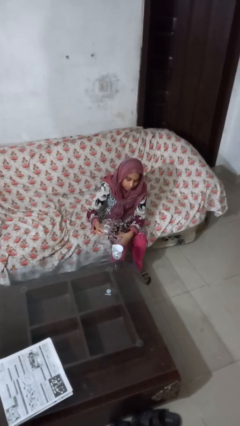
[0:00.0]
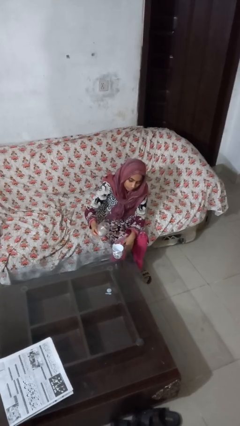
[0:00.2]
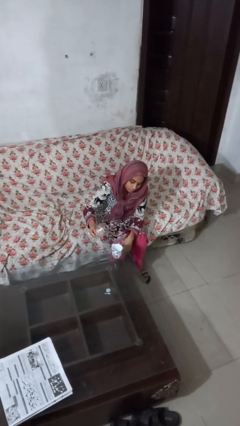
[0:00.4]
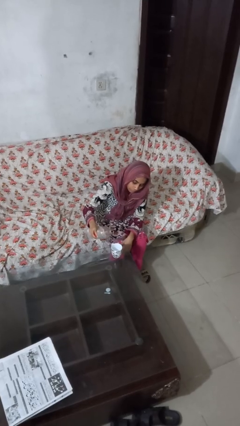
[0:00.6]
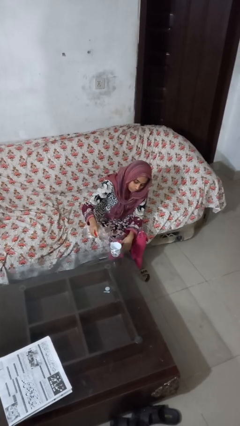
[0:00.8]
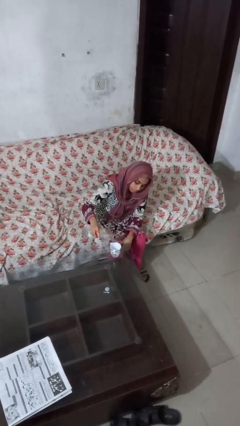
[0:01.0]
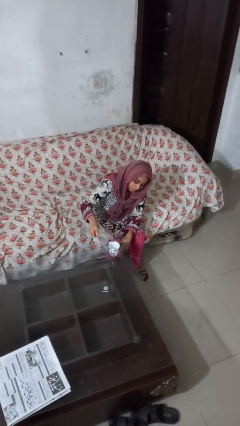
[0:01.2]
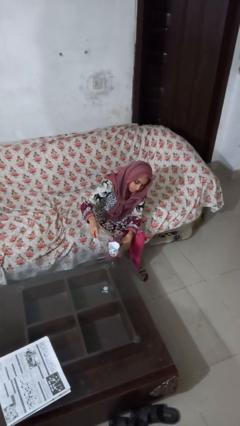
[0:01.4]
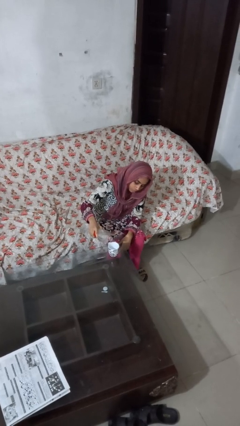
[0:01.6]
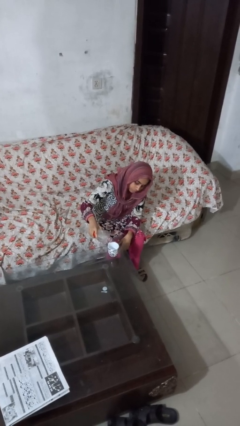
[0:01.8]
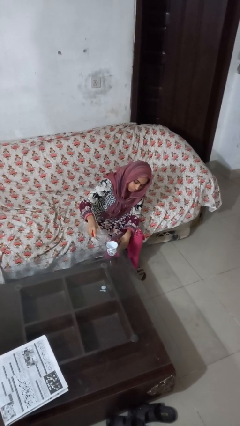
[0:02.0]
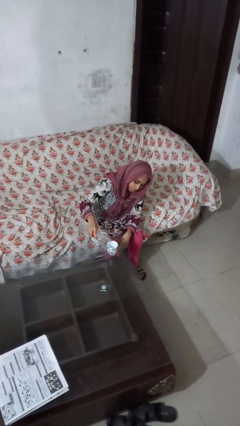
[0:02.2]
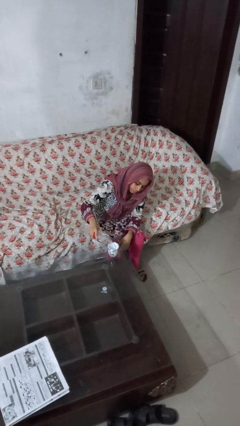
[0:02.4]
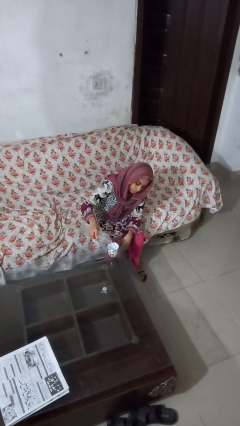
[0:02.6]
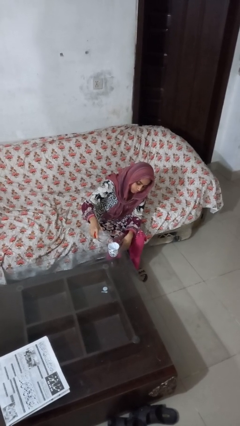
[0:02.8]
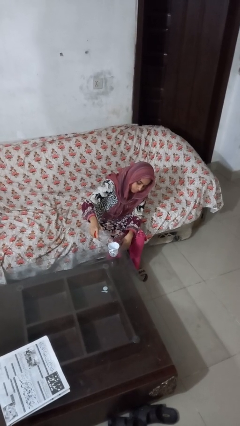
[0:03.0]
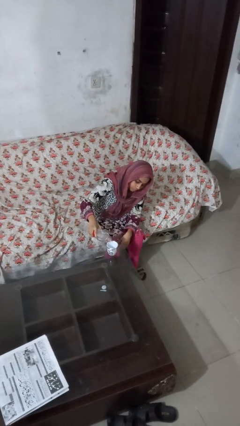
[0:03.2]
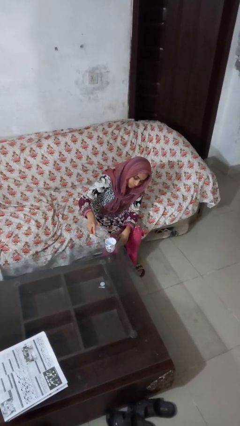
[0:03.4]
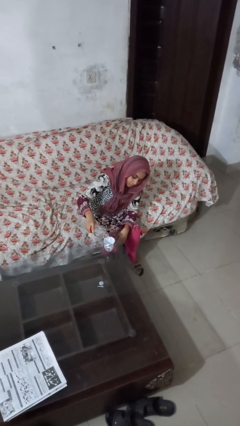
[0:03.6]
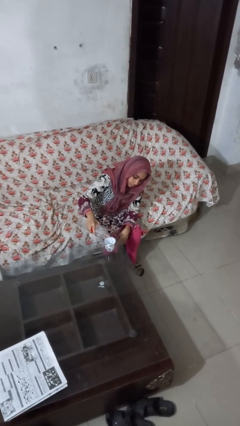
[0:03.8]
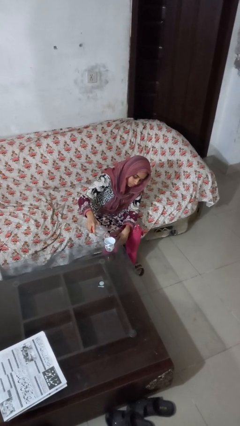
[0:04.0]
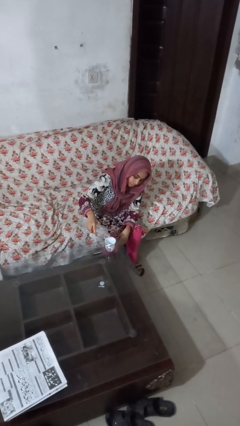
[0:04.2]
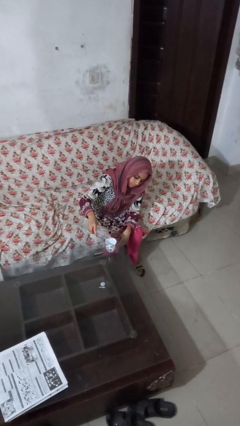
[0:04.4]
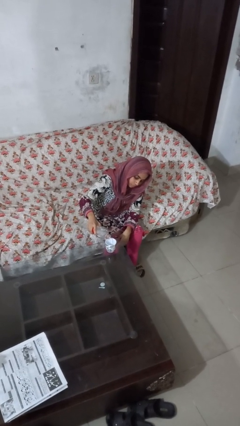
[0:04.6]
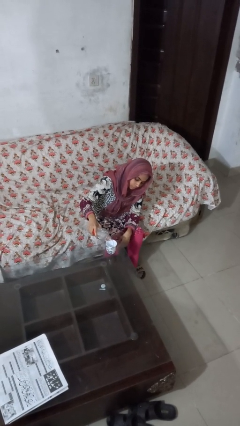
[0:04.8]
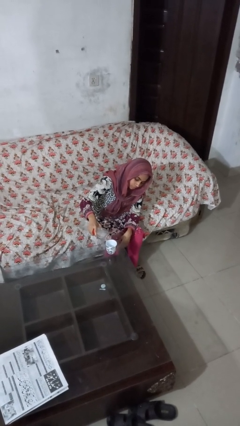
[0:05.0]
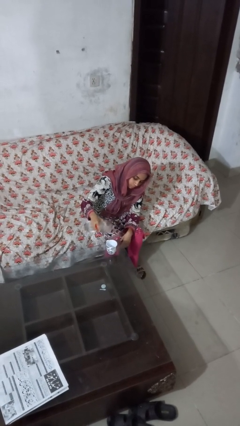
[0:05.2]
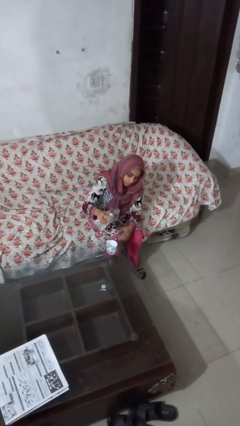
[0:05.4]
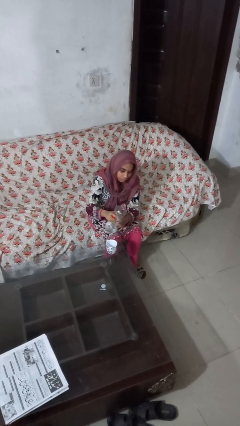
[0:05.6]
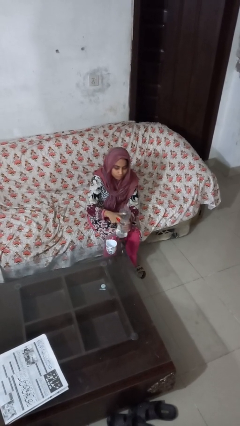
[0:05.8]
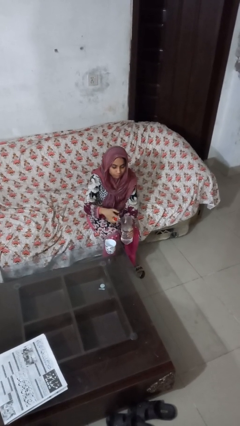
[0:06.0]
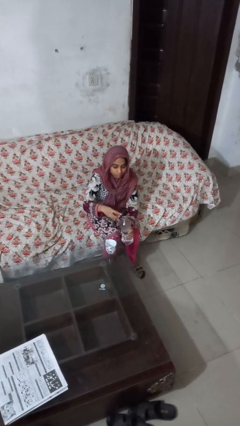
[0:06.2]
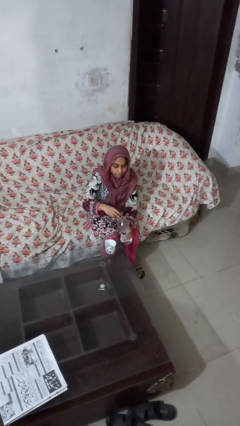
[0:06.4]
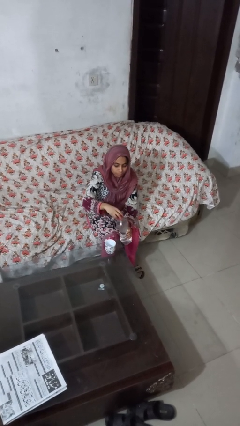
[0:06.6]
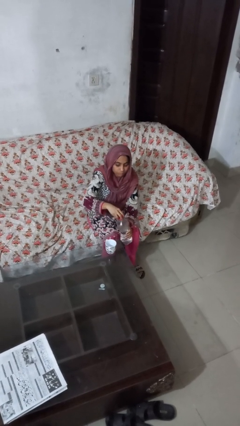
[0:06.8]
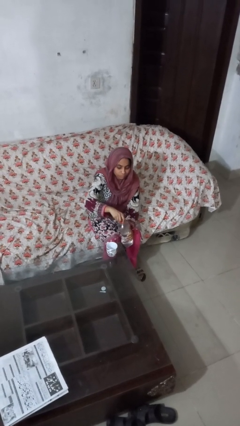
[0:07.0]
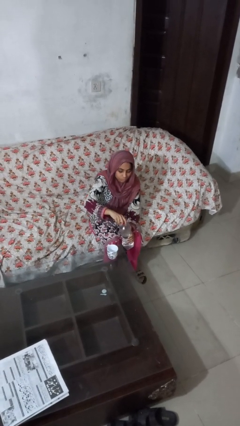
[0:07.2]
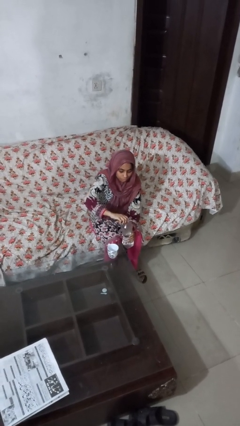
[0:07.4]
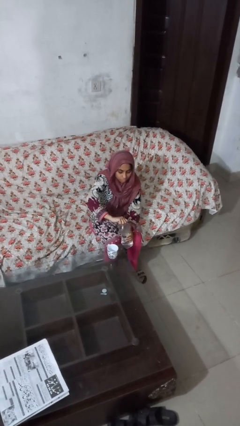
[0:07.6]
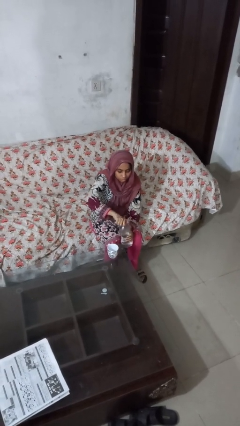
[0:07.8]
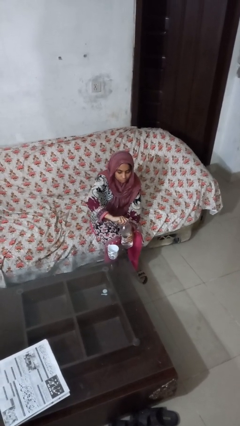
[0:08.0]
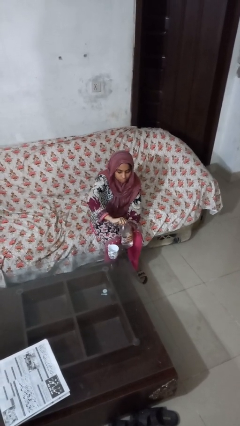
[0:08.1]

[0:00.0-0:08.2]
person pours liquid into cup

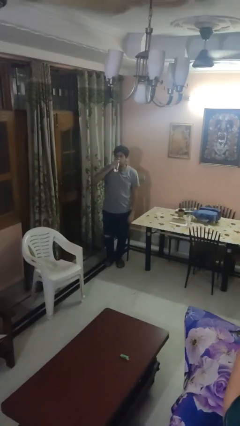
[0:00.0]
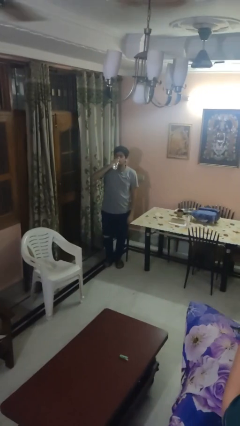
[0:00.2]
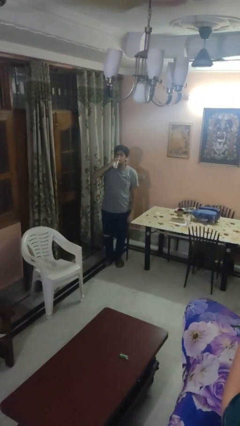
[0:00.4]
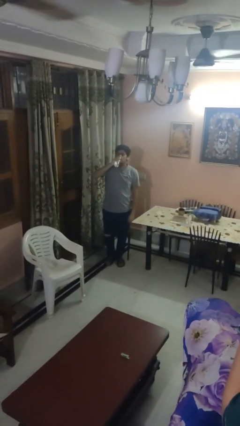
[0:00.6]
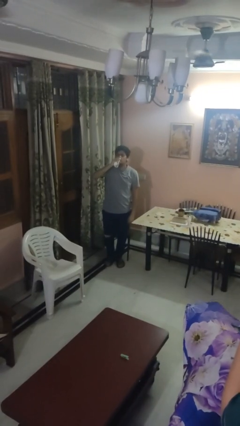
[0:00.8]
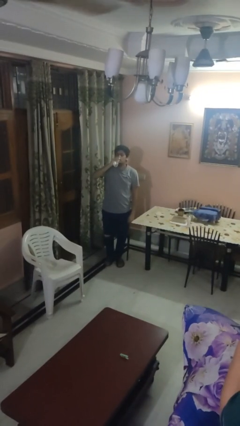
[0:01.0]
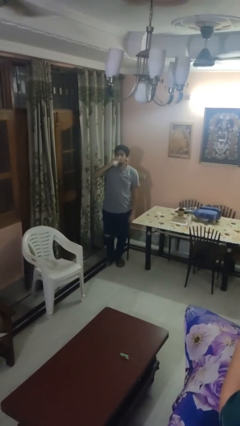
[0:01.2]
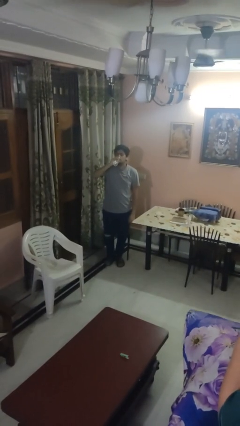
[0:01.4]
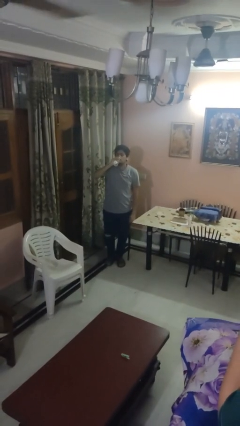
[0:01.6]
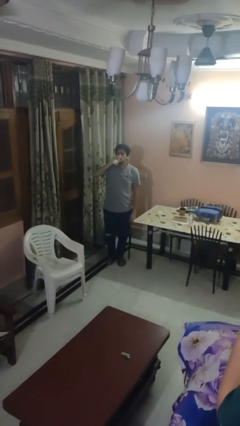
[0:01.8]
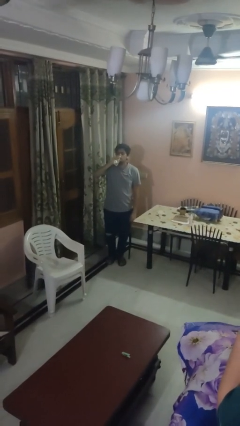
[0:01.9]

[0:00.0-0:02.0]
person drinks from bottle

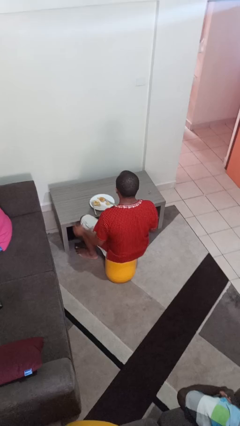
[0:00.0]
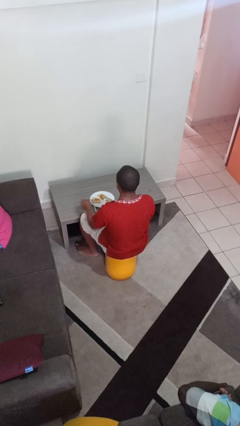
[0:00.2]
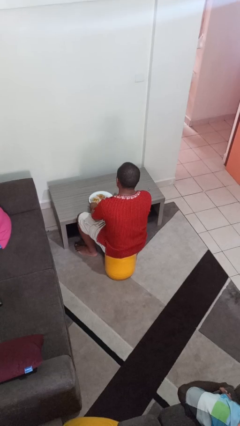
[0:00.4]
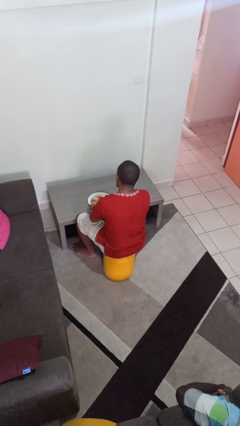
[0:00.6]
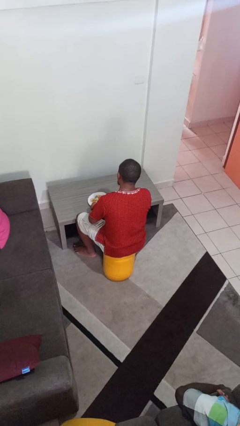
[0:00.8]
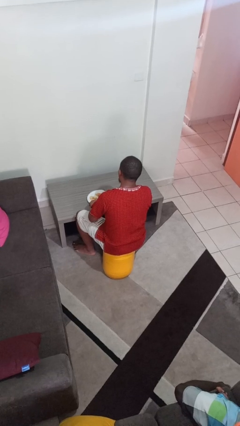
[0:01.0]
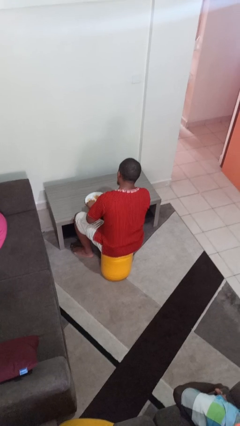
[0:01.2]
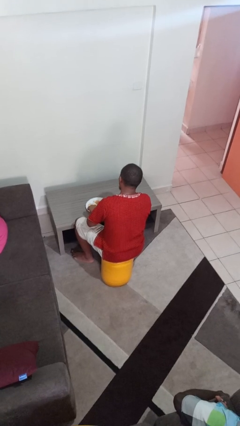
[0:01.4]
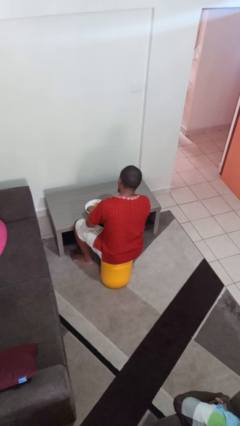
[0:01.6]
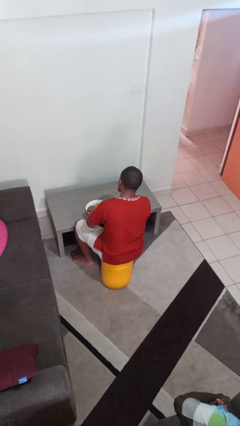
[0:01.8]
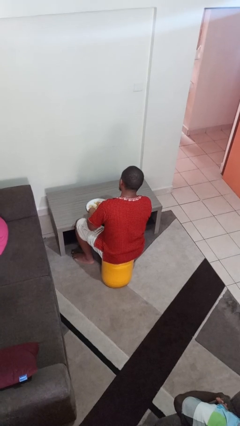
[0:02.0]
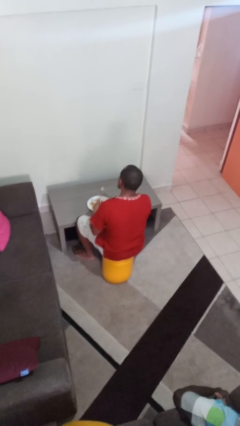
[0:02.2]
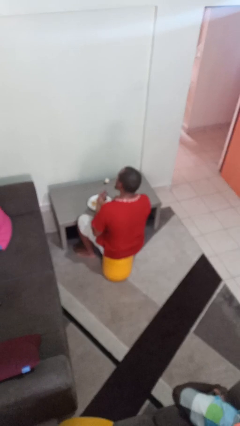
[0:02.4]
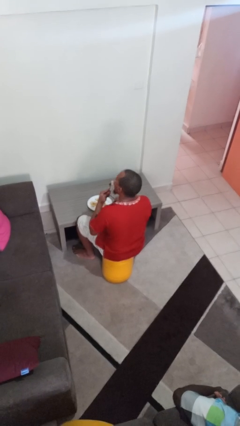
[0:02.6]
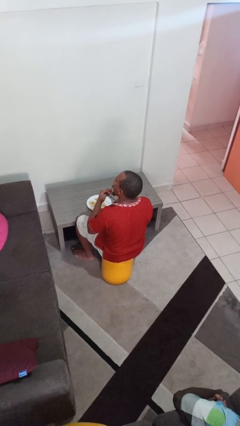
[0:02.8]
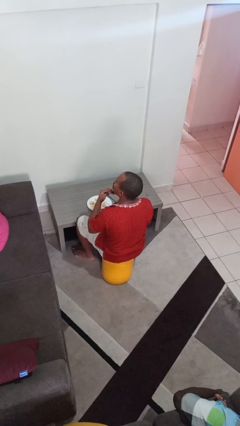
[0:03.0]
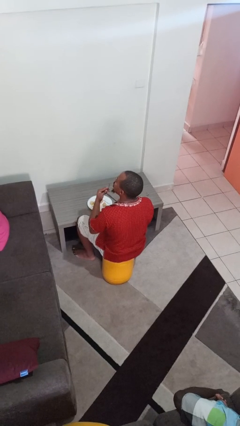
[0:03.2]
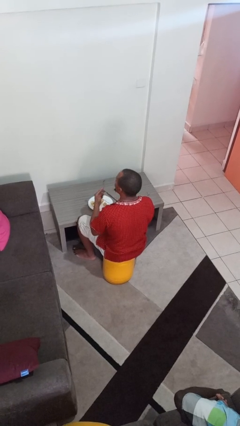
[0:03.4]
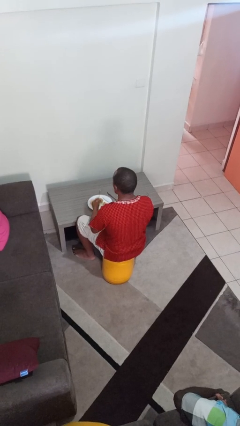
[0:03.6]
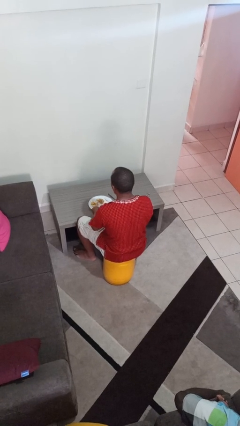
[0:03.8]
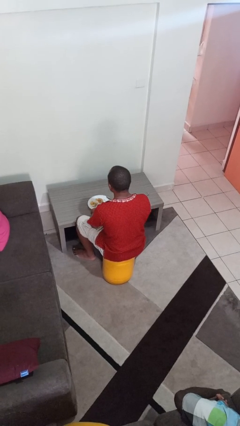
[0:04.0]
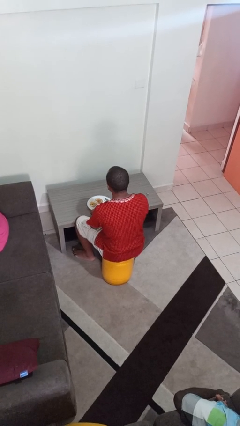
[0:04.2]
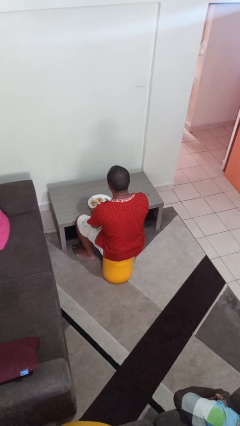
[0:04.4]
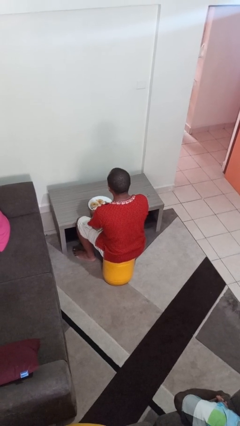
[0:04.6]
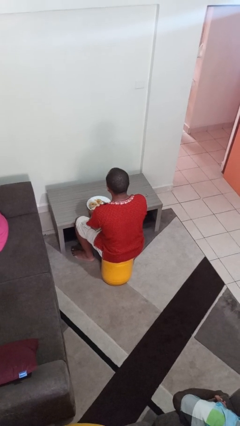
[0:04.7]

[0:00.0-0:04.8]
person eats with utensil

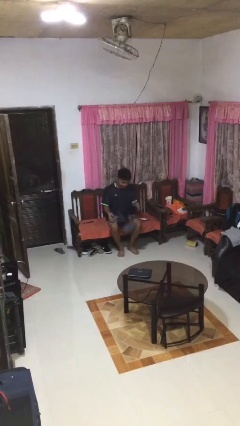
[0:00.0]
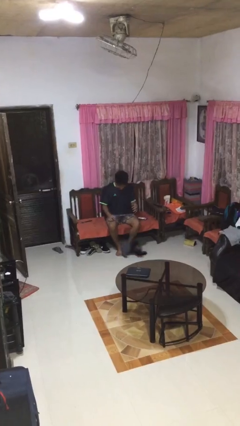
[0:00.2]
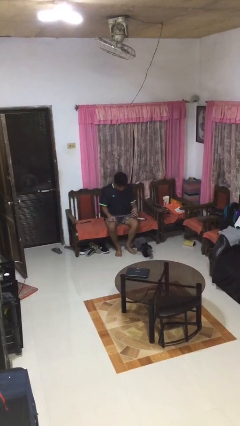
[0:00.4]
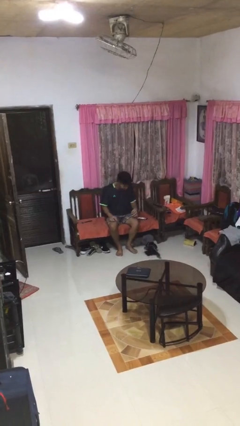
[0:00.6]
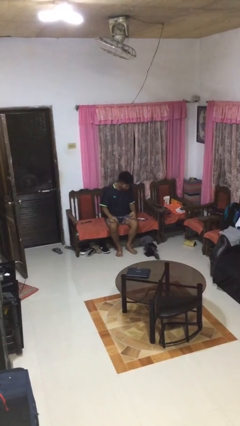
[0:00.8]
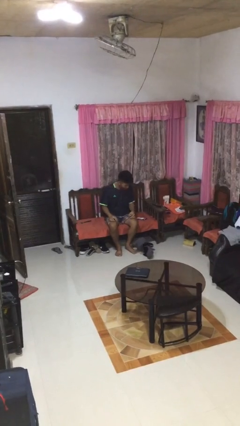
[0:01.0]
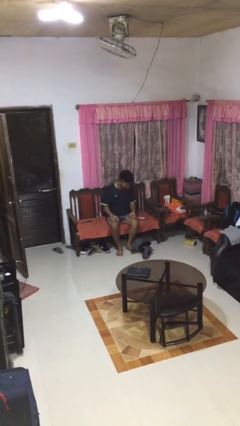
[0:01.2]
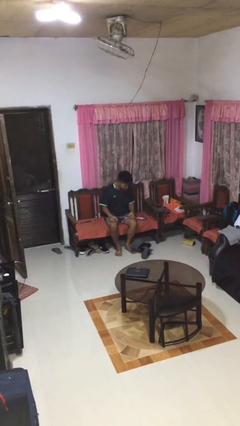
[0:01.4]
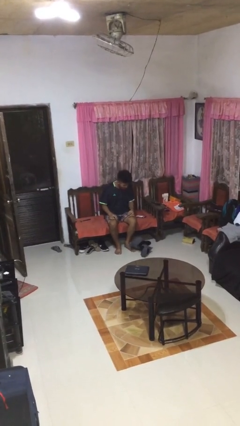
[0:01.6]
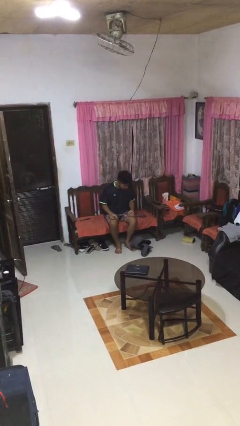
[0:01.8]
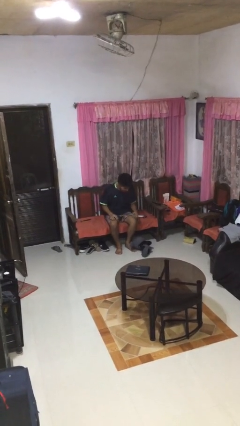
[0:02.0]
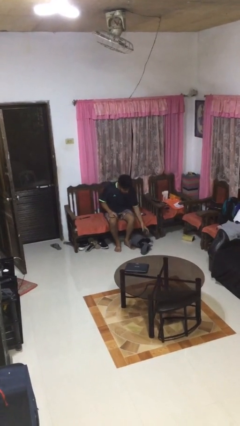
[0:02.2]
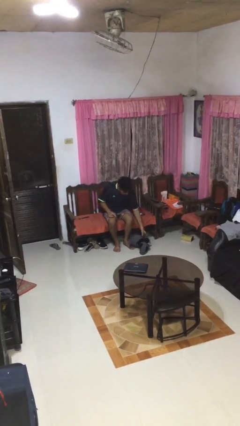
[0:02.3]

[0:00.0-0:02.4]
person drops object
